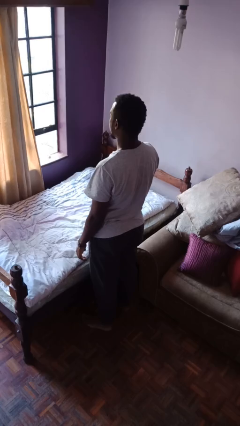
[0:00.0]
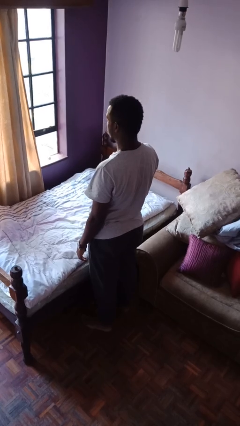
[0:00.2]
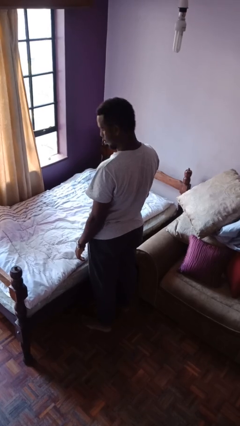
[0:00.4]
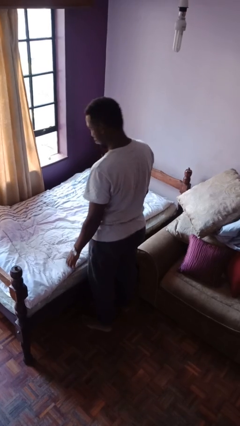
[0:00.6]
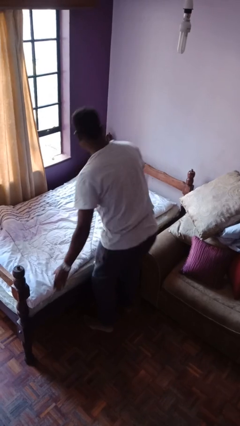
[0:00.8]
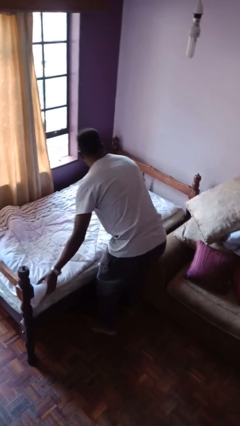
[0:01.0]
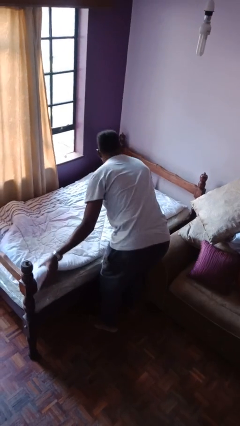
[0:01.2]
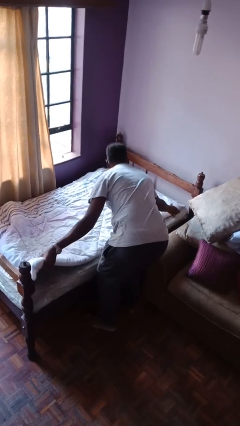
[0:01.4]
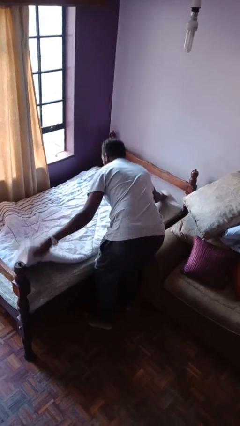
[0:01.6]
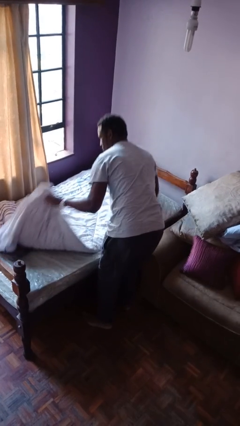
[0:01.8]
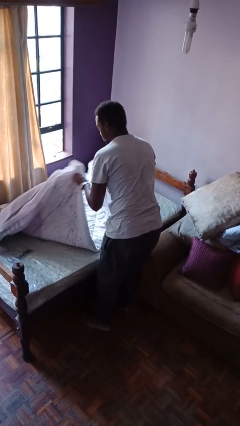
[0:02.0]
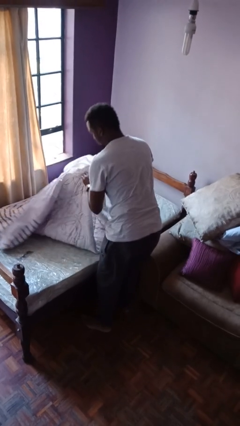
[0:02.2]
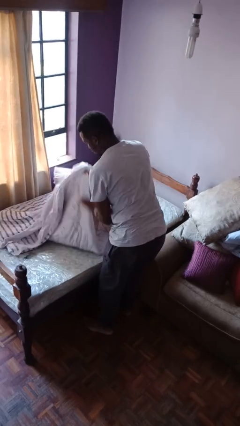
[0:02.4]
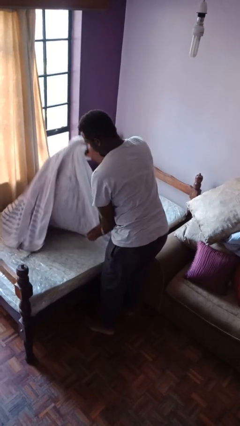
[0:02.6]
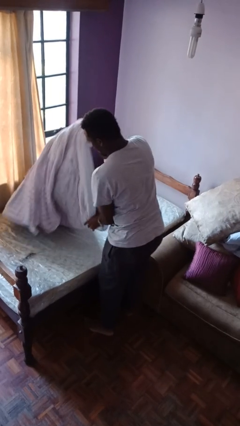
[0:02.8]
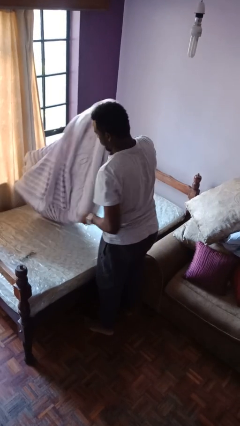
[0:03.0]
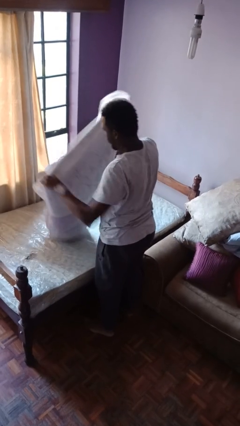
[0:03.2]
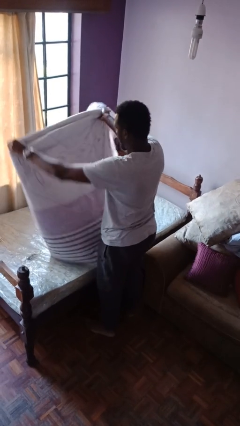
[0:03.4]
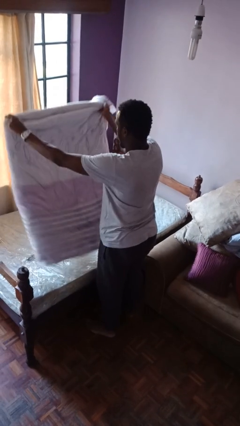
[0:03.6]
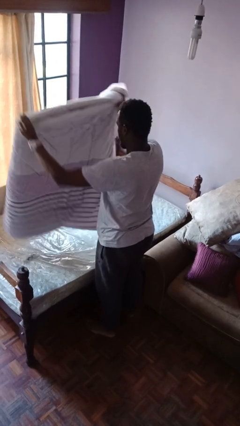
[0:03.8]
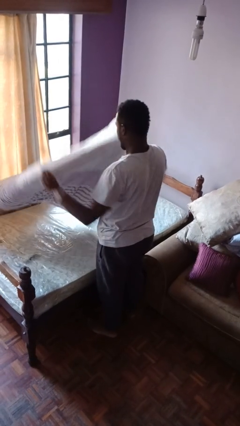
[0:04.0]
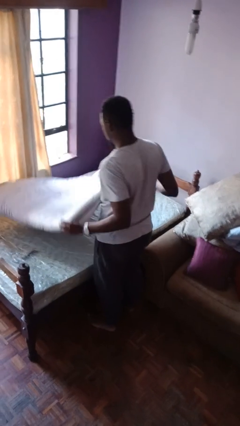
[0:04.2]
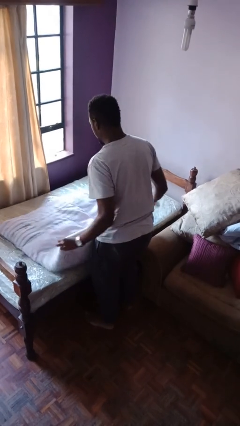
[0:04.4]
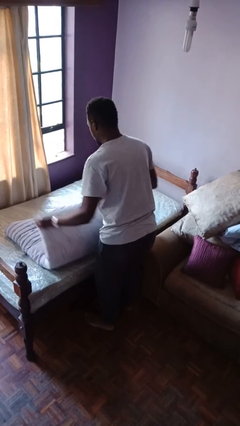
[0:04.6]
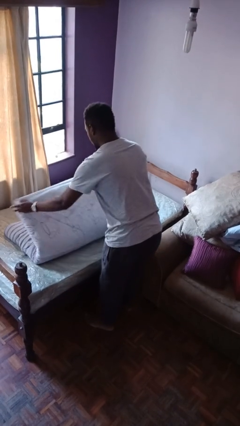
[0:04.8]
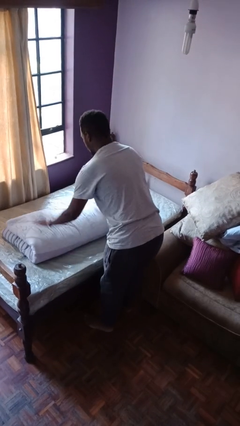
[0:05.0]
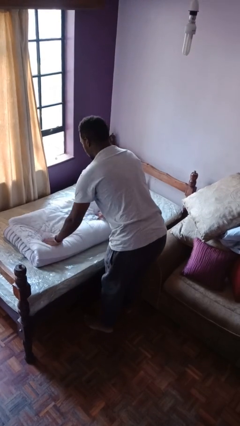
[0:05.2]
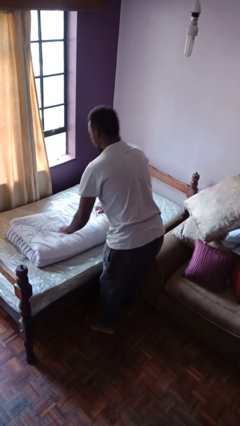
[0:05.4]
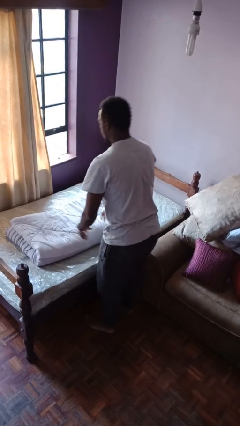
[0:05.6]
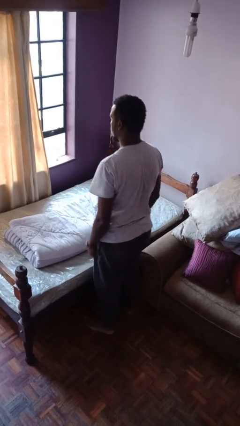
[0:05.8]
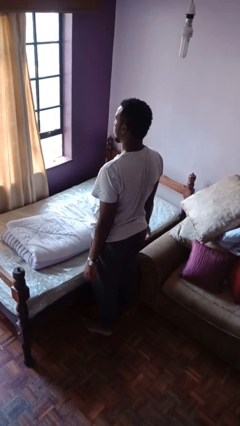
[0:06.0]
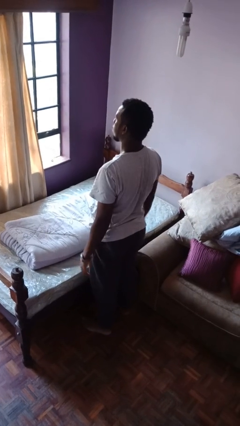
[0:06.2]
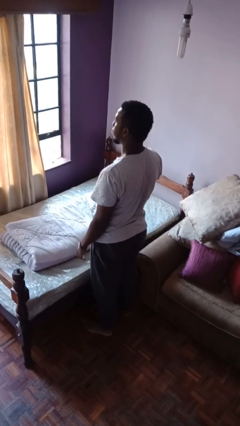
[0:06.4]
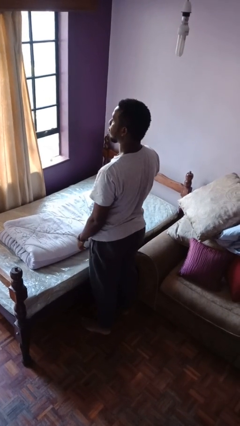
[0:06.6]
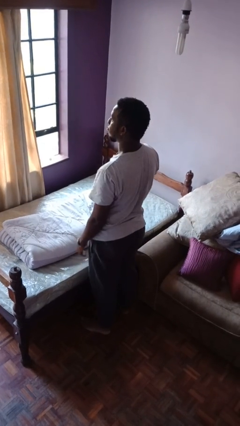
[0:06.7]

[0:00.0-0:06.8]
person folds blanket

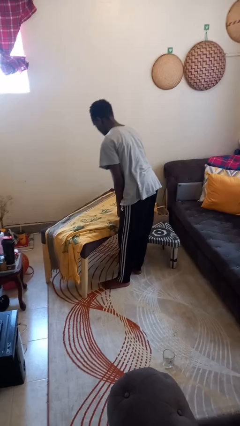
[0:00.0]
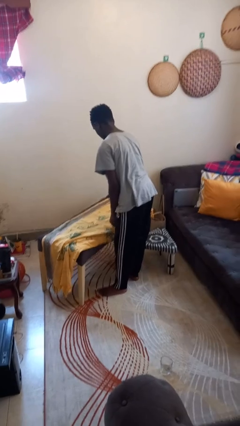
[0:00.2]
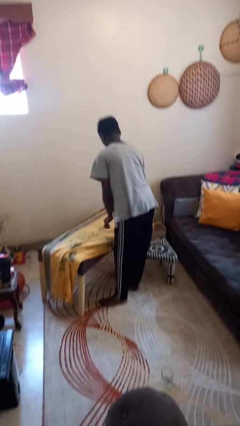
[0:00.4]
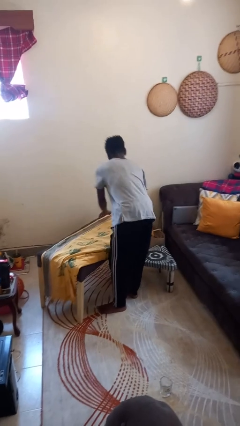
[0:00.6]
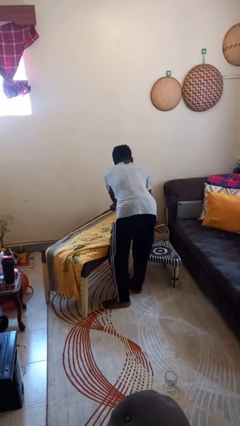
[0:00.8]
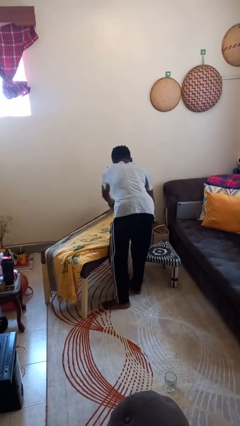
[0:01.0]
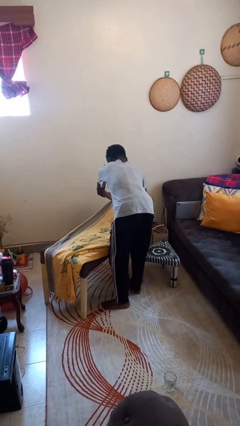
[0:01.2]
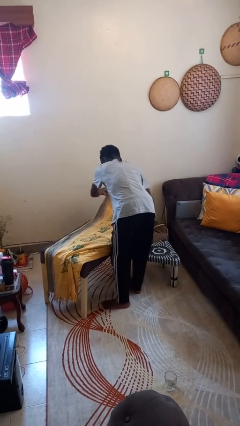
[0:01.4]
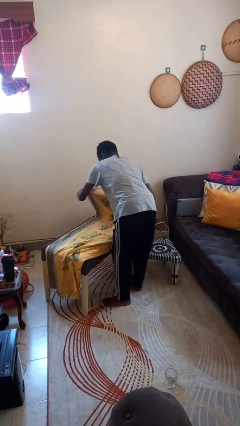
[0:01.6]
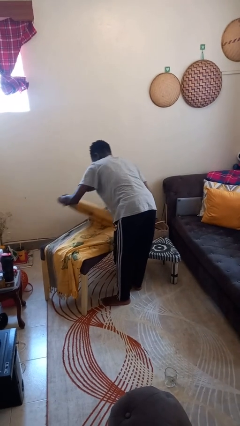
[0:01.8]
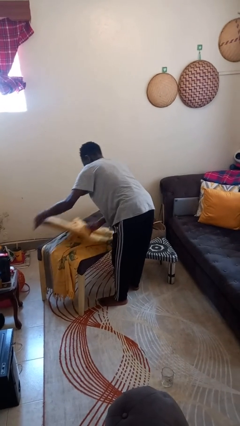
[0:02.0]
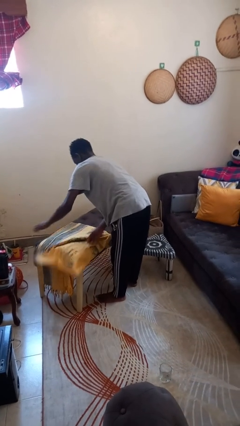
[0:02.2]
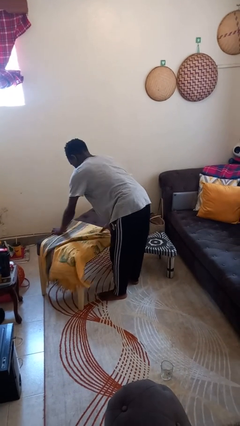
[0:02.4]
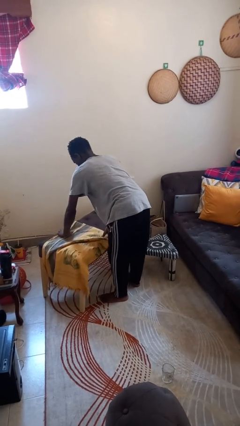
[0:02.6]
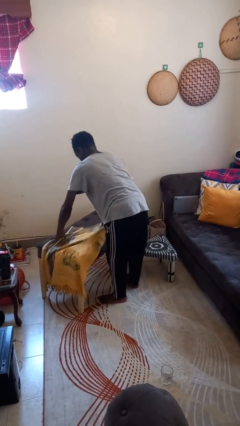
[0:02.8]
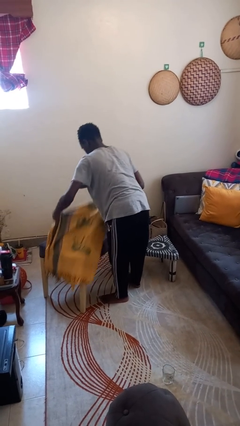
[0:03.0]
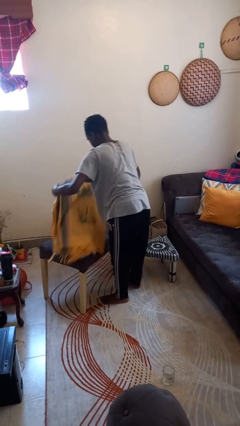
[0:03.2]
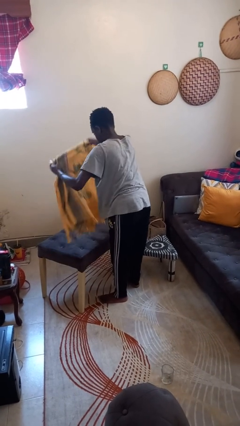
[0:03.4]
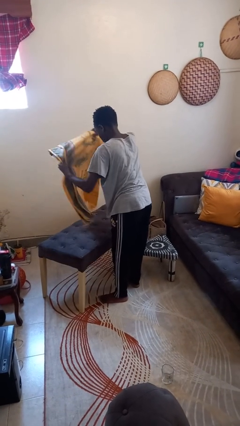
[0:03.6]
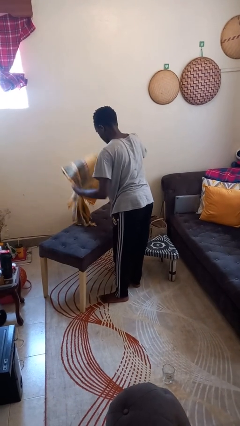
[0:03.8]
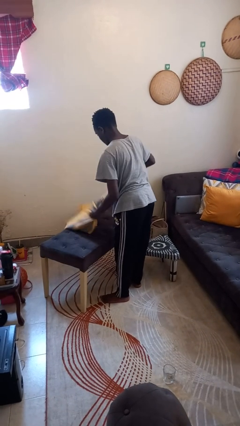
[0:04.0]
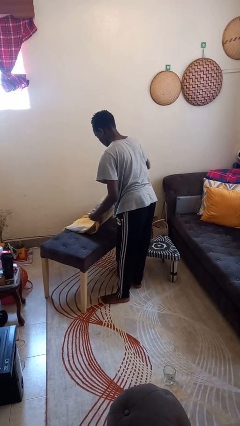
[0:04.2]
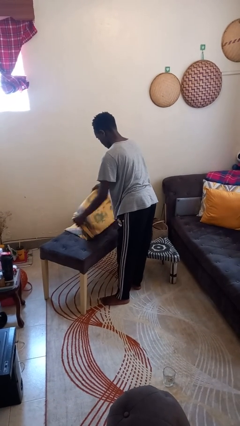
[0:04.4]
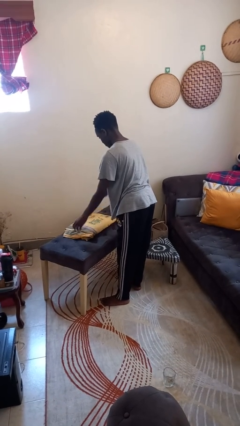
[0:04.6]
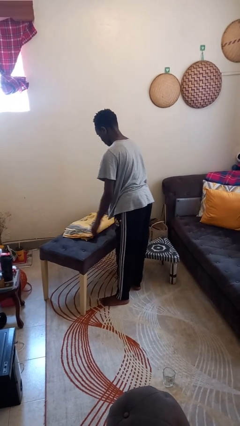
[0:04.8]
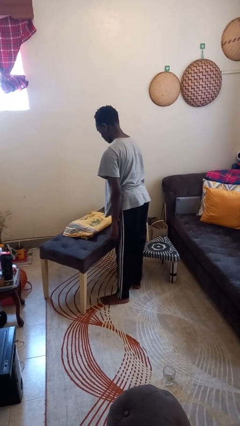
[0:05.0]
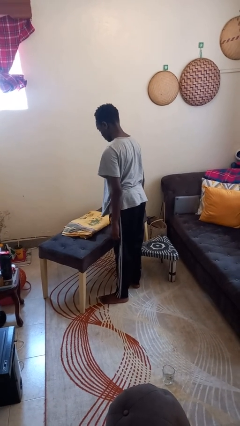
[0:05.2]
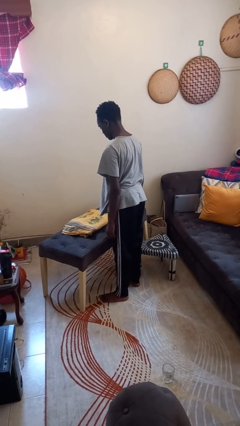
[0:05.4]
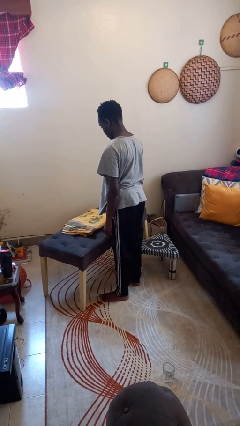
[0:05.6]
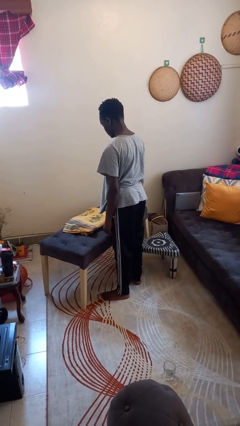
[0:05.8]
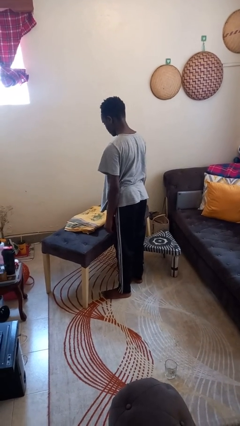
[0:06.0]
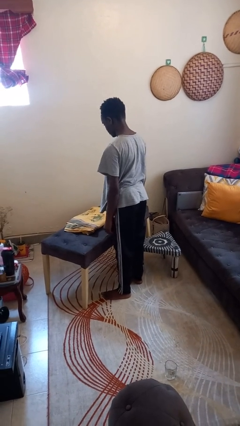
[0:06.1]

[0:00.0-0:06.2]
person folds tablecloth

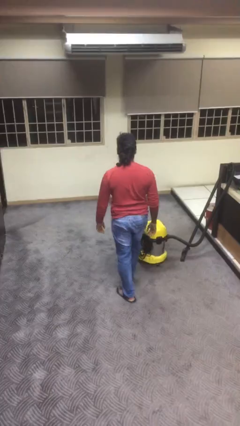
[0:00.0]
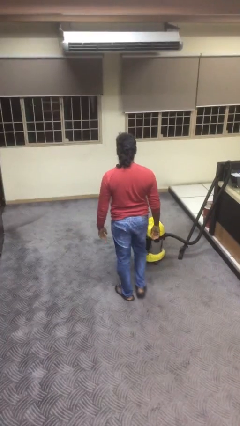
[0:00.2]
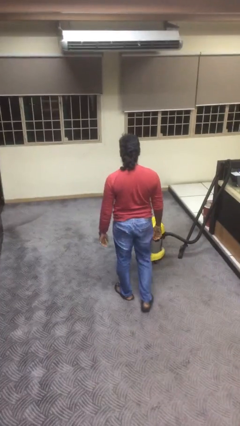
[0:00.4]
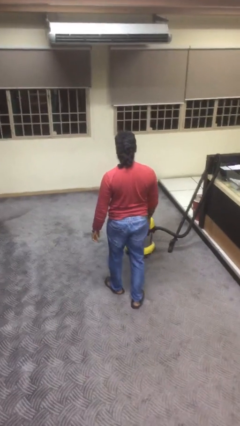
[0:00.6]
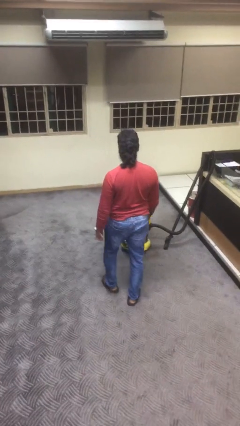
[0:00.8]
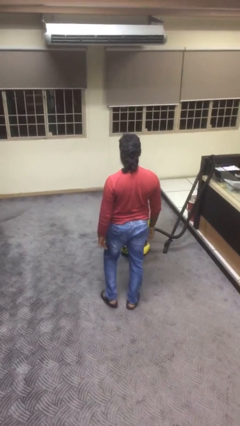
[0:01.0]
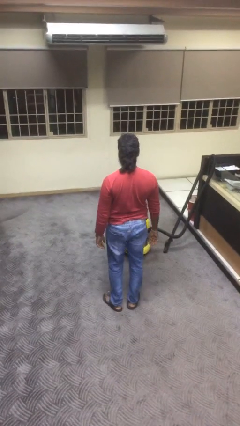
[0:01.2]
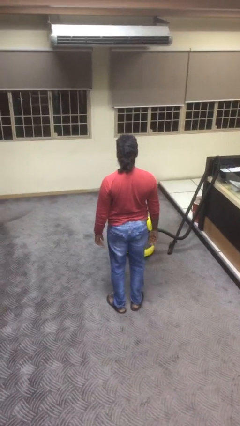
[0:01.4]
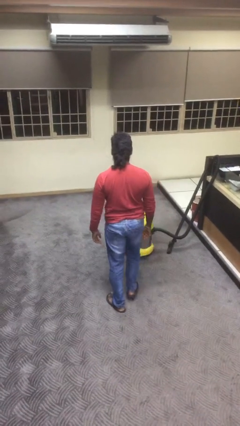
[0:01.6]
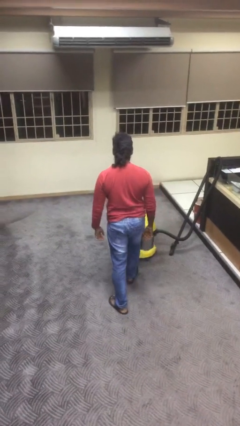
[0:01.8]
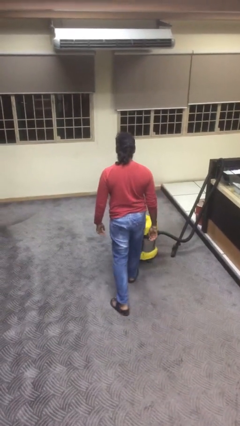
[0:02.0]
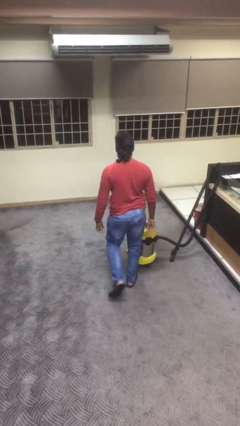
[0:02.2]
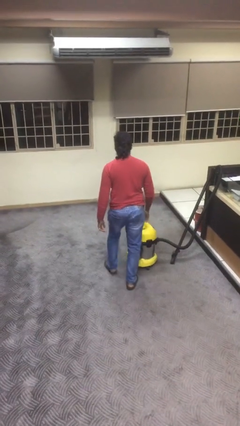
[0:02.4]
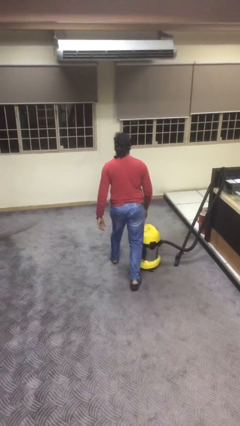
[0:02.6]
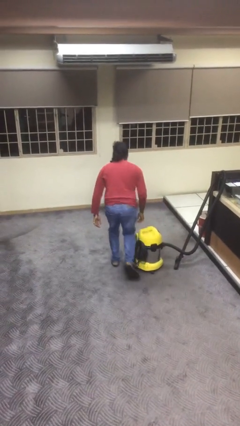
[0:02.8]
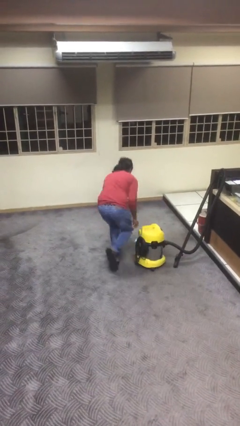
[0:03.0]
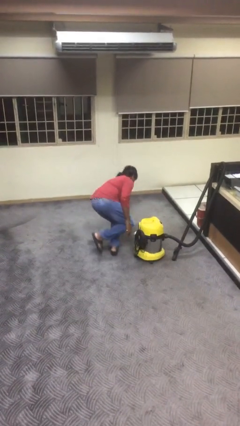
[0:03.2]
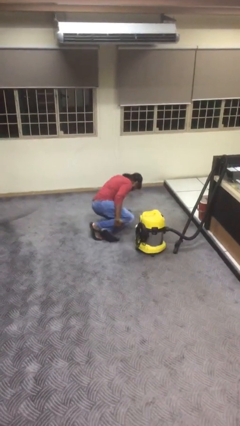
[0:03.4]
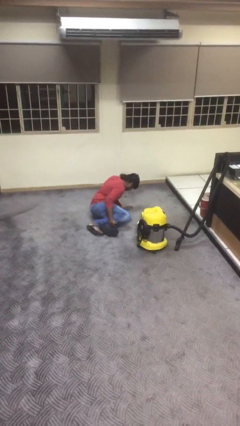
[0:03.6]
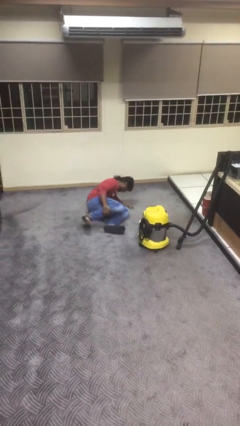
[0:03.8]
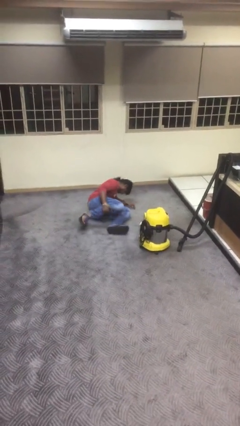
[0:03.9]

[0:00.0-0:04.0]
person trips on object on floor

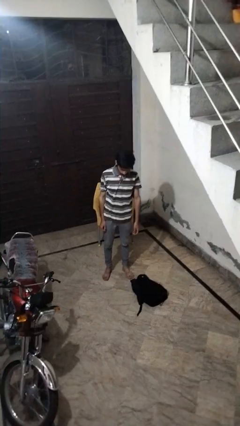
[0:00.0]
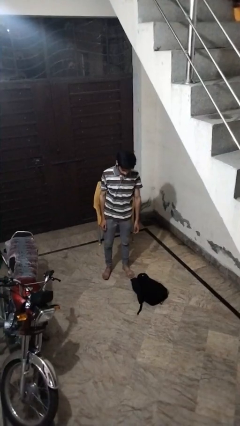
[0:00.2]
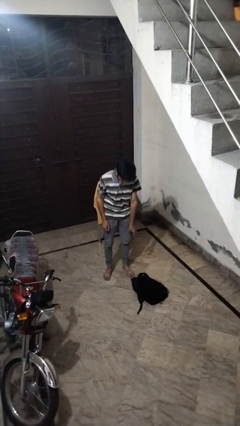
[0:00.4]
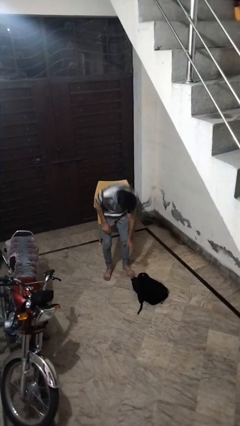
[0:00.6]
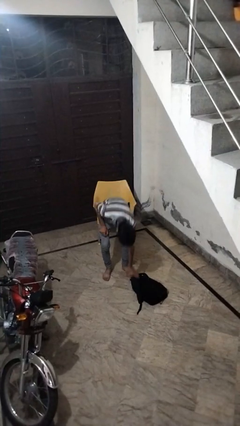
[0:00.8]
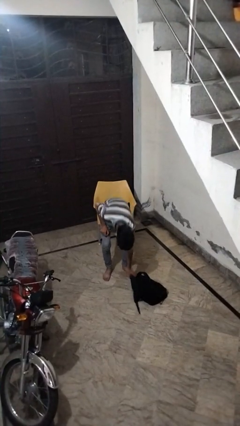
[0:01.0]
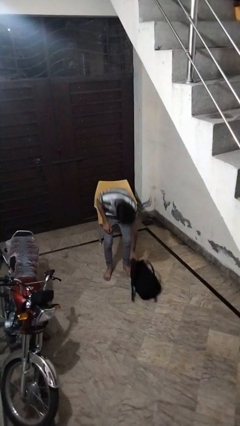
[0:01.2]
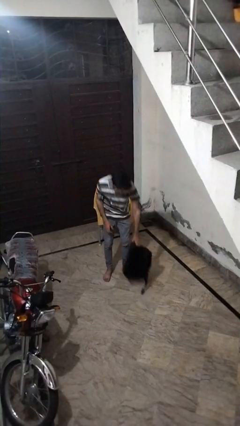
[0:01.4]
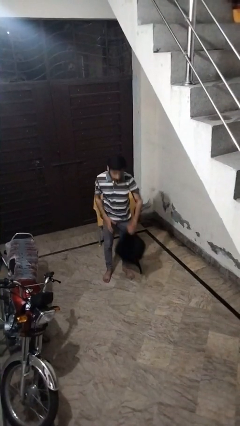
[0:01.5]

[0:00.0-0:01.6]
person picks up object from floor
